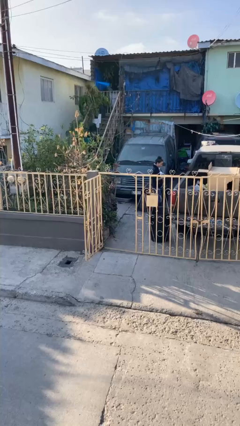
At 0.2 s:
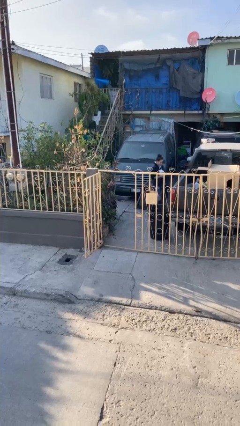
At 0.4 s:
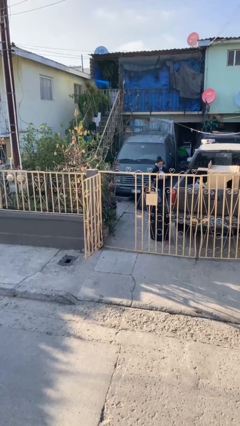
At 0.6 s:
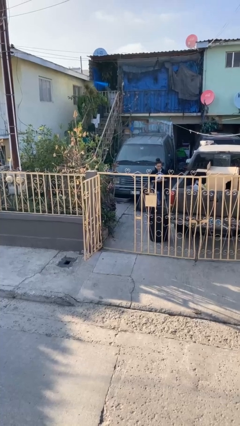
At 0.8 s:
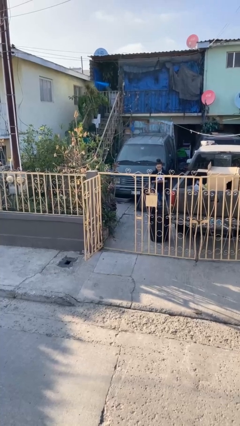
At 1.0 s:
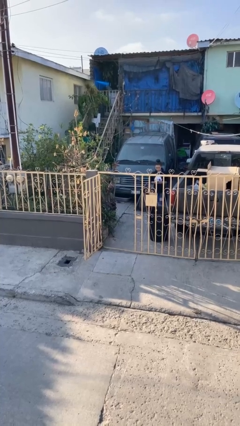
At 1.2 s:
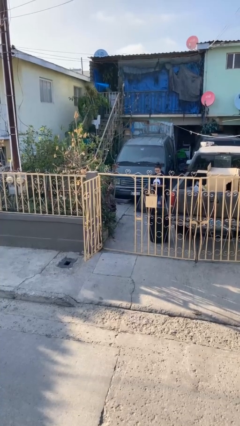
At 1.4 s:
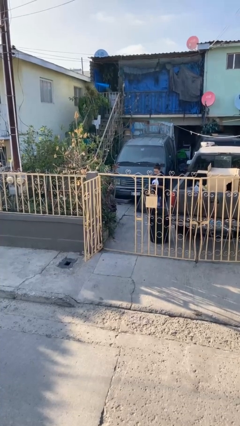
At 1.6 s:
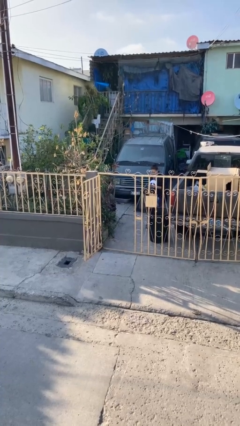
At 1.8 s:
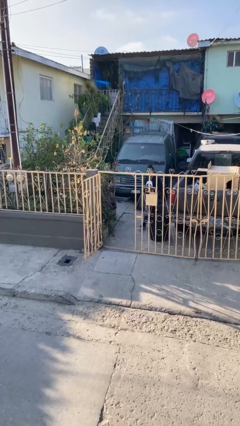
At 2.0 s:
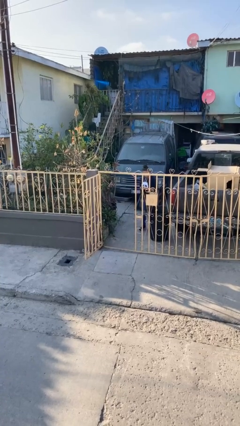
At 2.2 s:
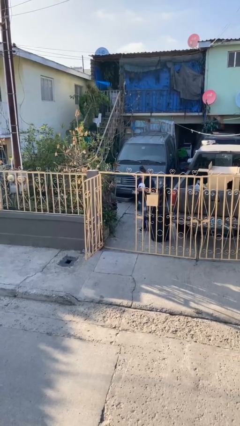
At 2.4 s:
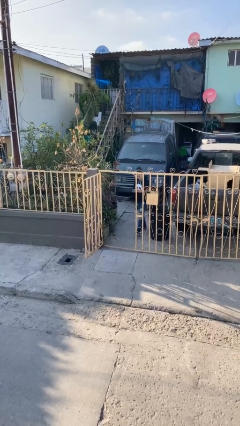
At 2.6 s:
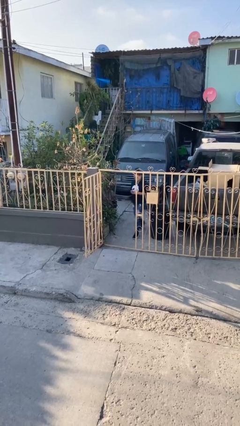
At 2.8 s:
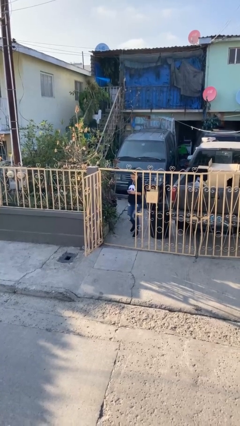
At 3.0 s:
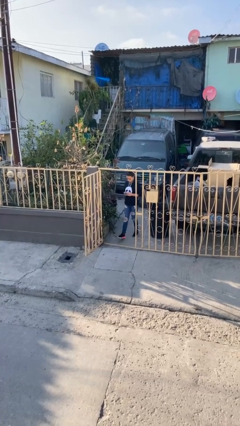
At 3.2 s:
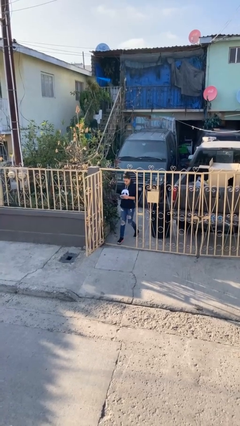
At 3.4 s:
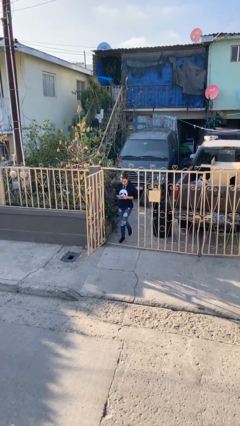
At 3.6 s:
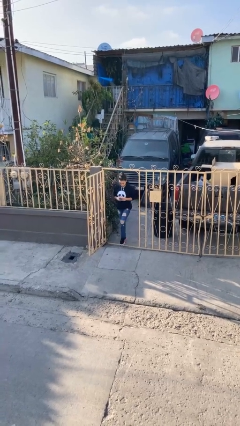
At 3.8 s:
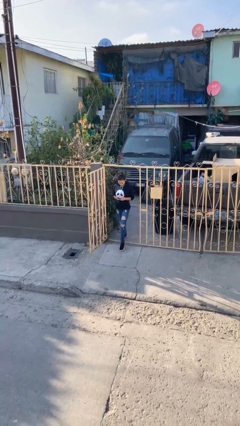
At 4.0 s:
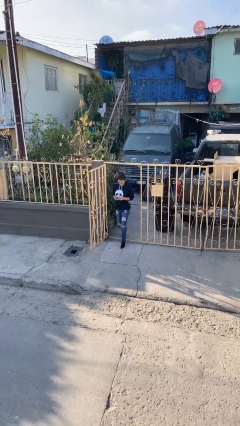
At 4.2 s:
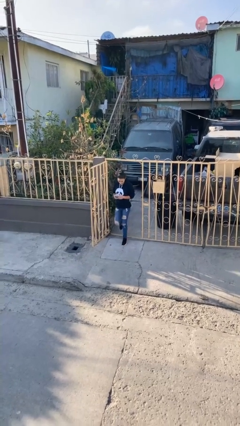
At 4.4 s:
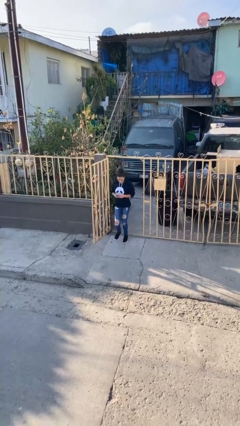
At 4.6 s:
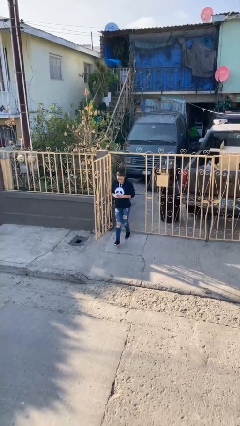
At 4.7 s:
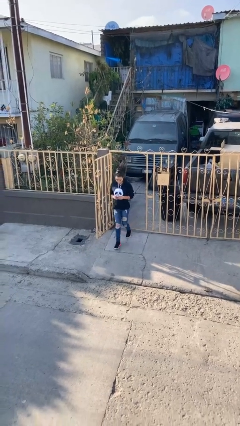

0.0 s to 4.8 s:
person enters scene through structure

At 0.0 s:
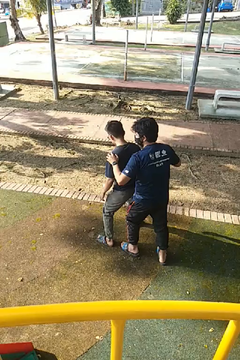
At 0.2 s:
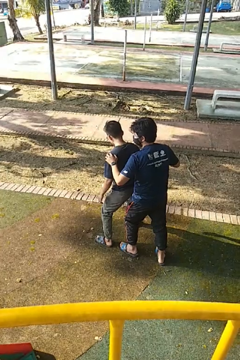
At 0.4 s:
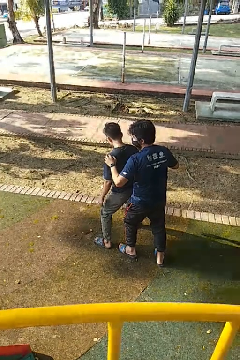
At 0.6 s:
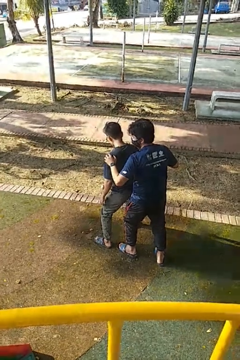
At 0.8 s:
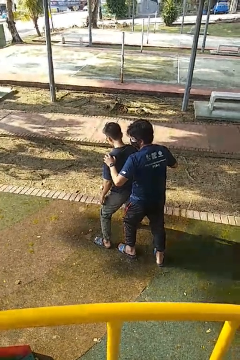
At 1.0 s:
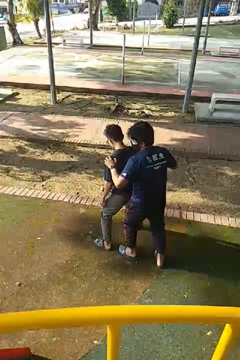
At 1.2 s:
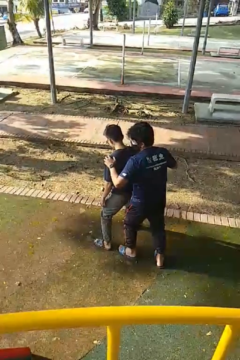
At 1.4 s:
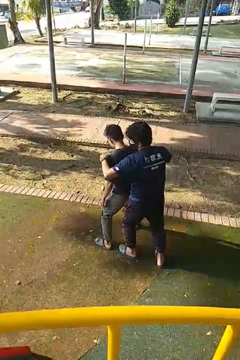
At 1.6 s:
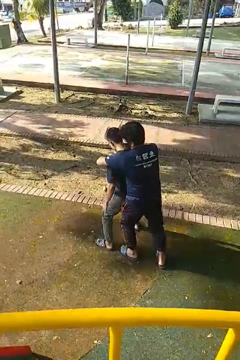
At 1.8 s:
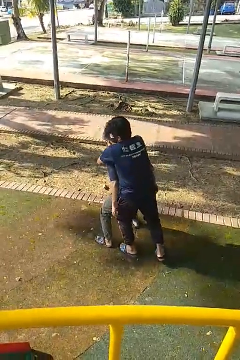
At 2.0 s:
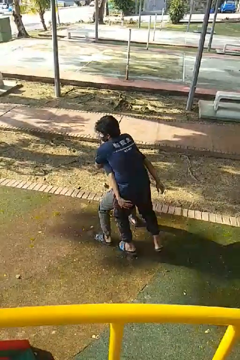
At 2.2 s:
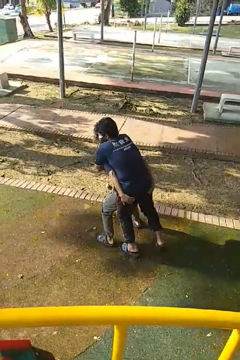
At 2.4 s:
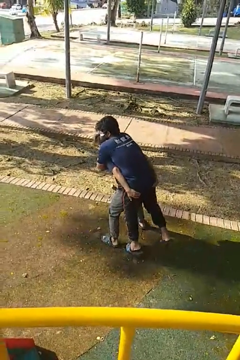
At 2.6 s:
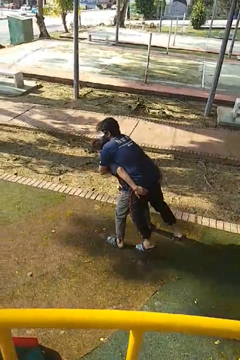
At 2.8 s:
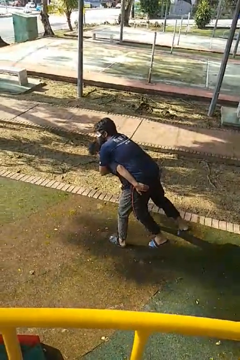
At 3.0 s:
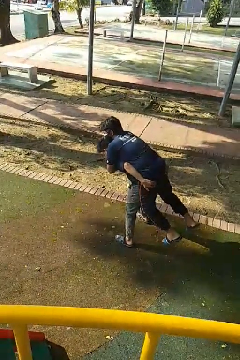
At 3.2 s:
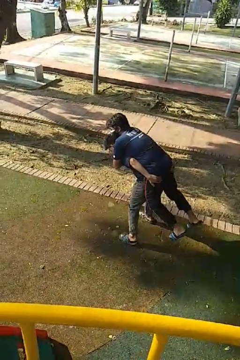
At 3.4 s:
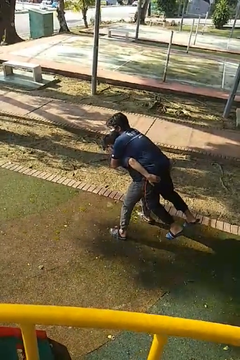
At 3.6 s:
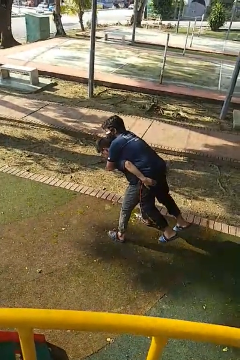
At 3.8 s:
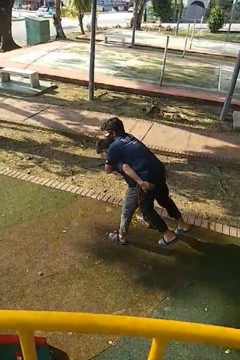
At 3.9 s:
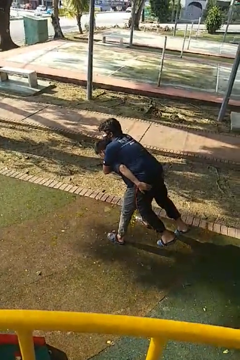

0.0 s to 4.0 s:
person carries person over shoulder

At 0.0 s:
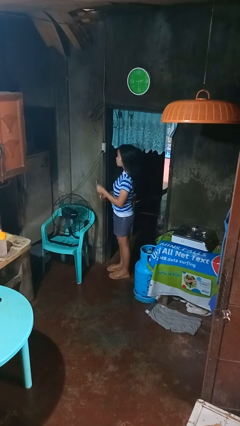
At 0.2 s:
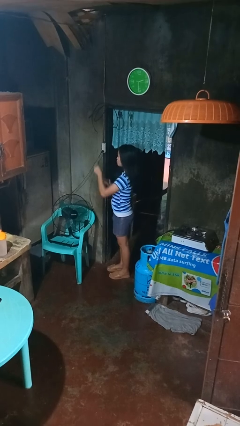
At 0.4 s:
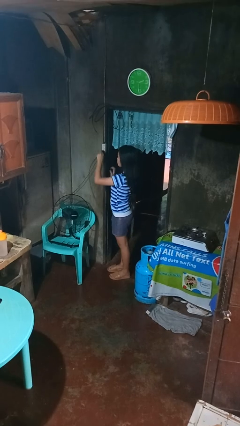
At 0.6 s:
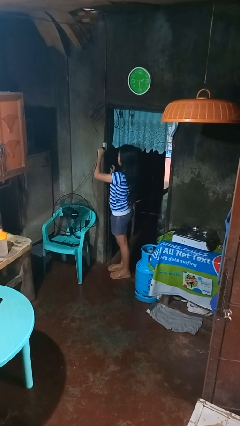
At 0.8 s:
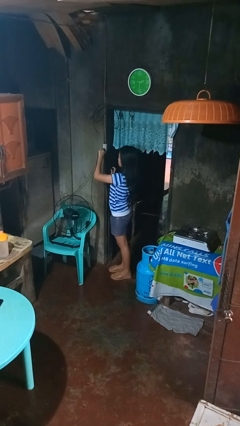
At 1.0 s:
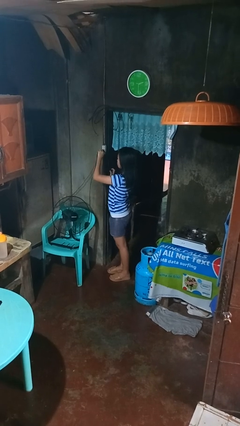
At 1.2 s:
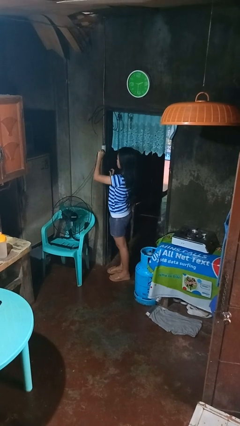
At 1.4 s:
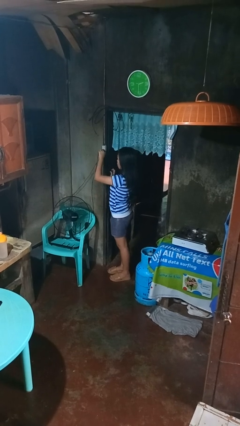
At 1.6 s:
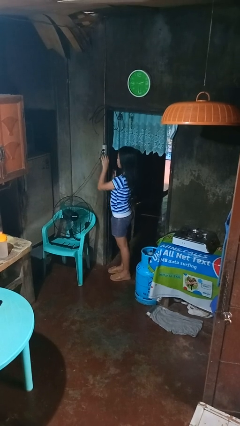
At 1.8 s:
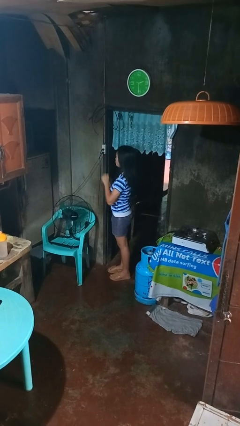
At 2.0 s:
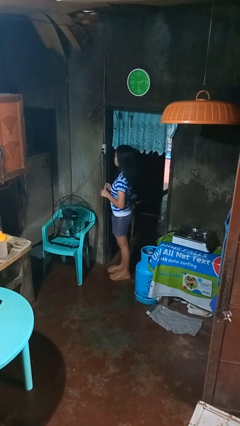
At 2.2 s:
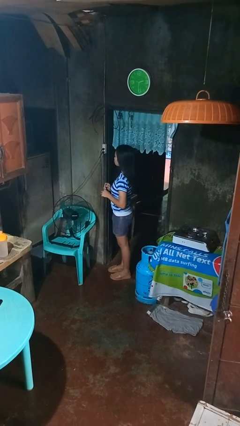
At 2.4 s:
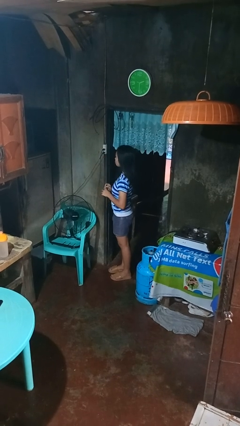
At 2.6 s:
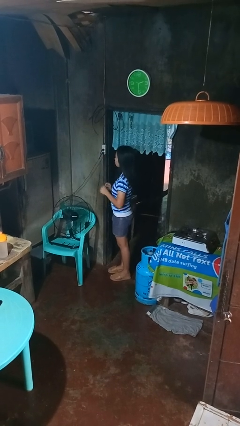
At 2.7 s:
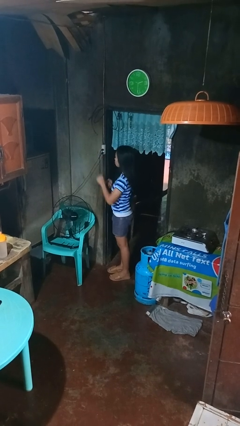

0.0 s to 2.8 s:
person plugs into electrical socket

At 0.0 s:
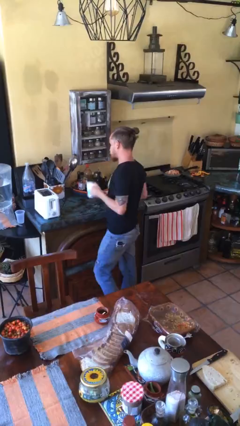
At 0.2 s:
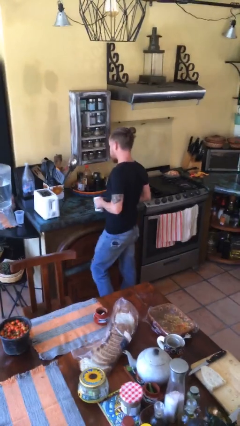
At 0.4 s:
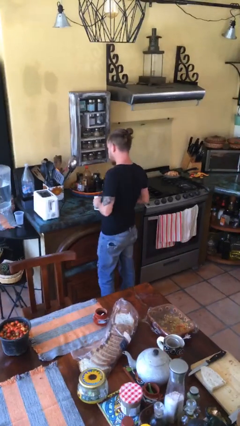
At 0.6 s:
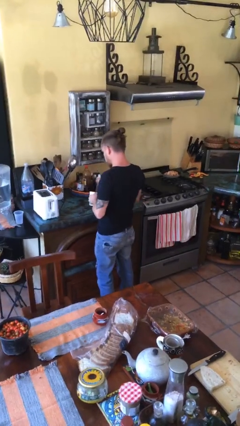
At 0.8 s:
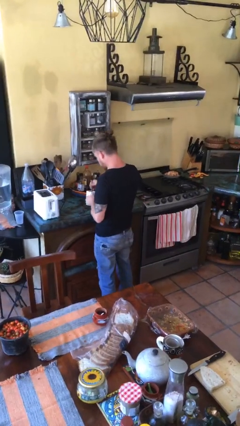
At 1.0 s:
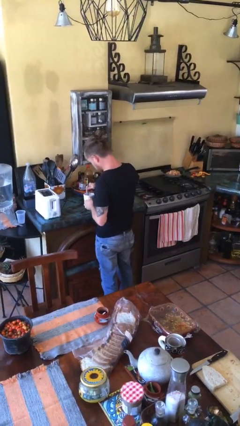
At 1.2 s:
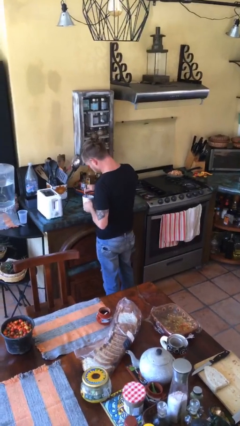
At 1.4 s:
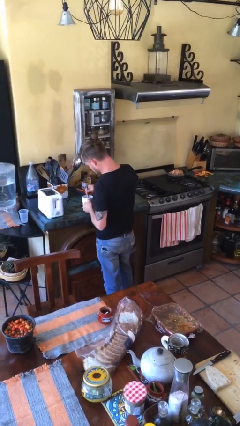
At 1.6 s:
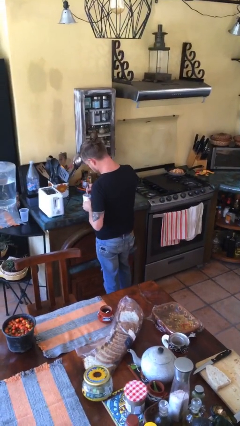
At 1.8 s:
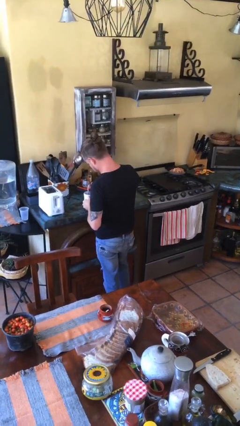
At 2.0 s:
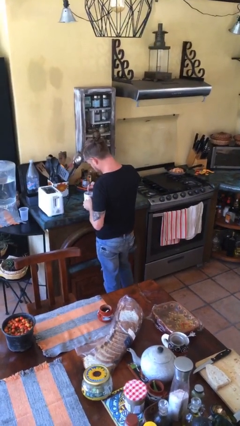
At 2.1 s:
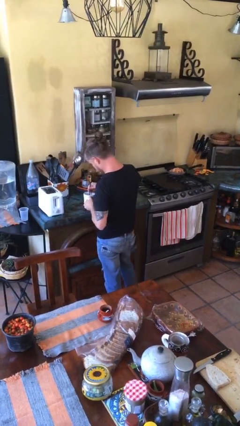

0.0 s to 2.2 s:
person stirs mug

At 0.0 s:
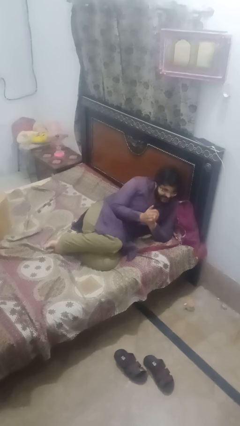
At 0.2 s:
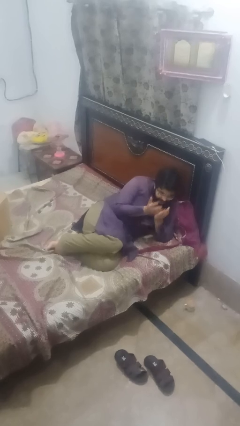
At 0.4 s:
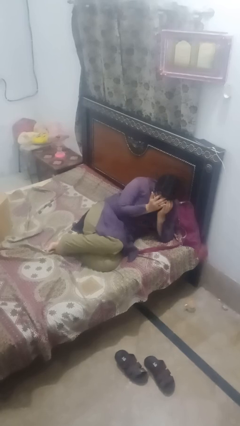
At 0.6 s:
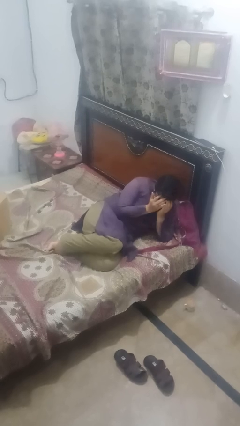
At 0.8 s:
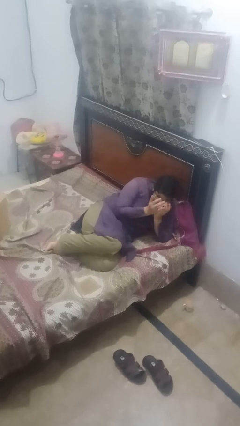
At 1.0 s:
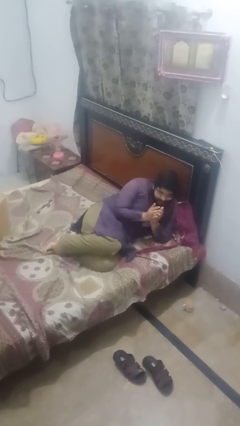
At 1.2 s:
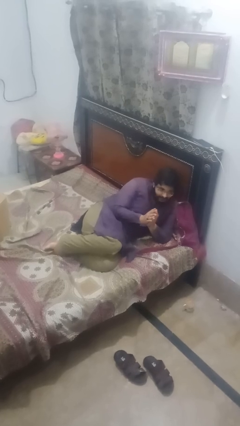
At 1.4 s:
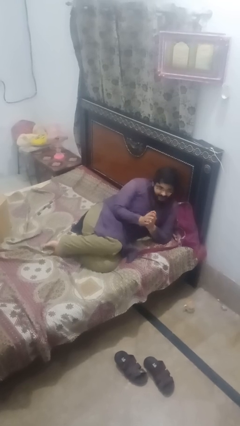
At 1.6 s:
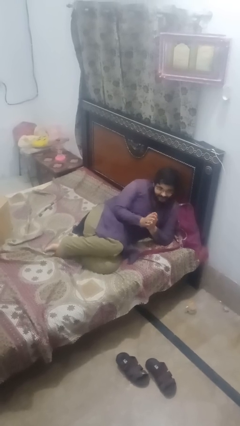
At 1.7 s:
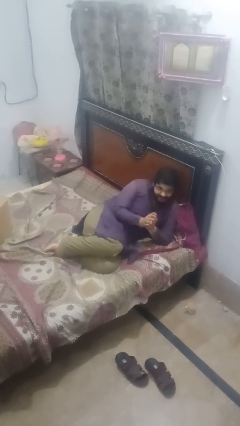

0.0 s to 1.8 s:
person covers face with hands

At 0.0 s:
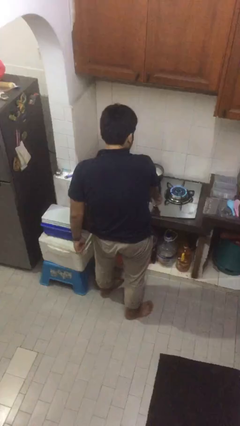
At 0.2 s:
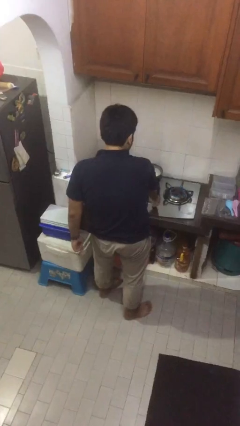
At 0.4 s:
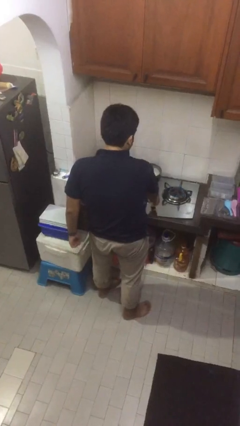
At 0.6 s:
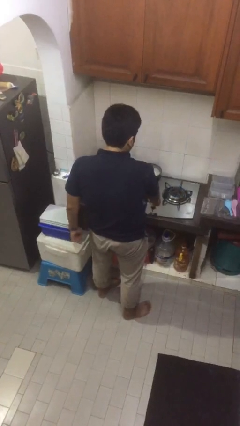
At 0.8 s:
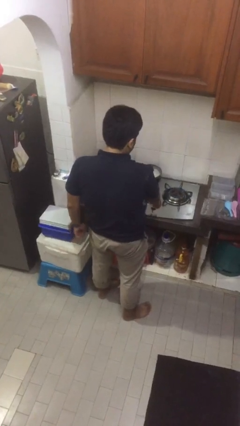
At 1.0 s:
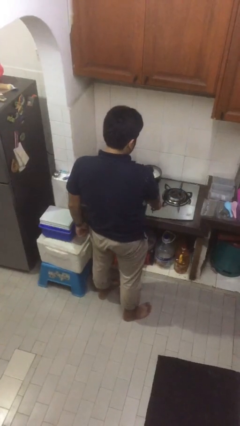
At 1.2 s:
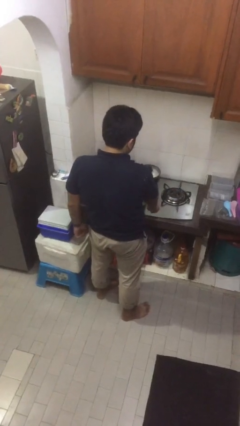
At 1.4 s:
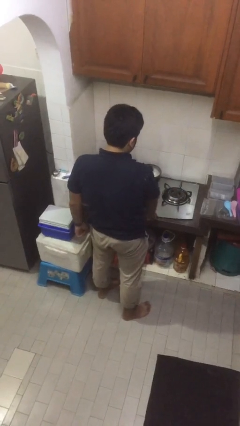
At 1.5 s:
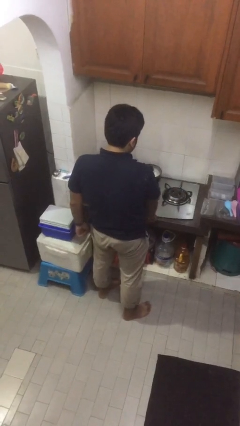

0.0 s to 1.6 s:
person turns off stovetop

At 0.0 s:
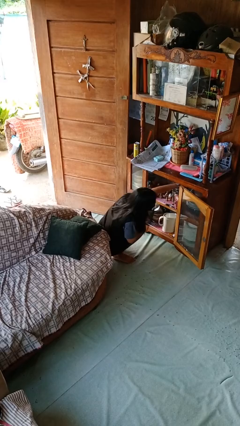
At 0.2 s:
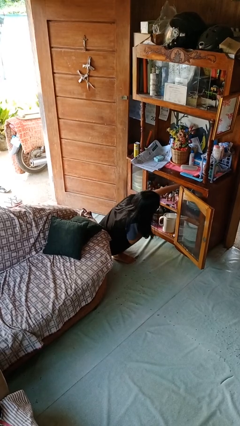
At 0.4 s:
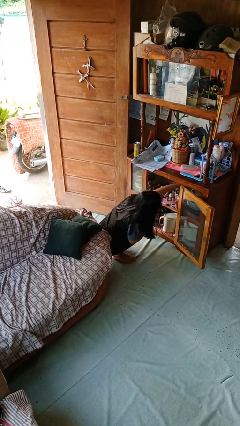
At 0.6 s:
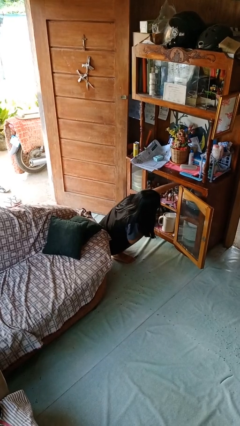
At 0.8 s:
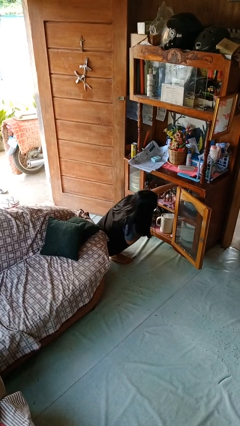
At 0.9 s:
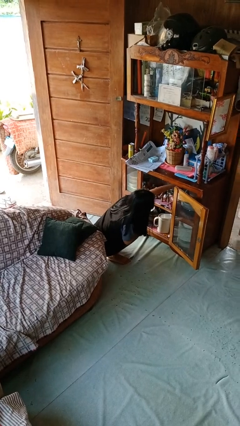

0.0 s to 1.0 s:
person searches in cabinet
